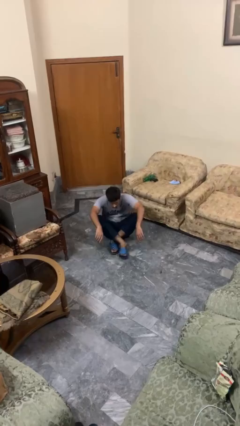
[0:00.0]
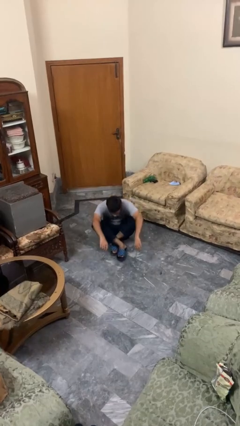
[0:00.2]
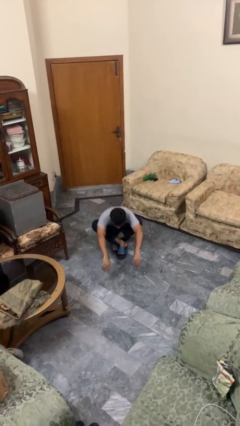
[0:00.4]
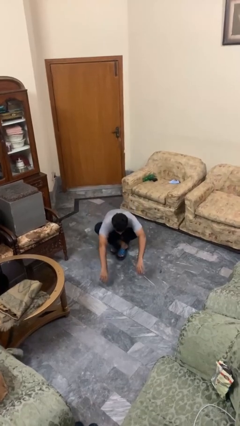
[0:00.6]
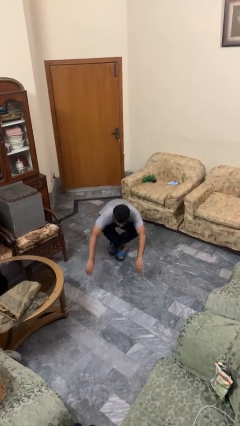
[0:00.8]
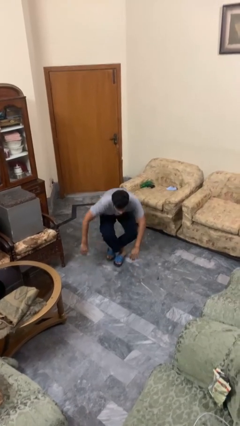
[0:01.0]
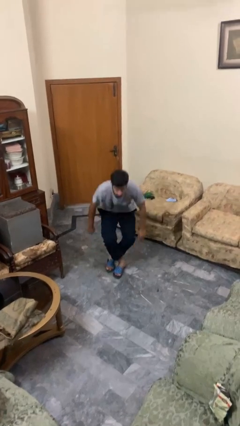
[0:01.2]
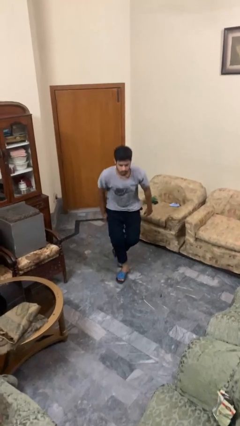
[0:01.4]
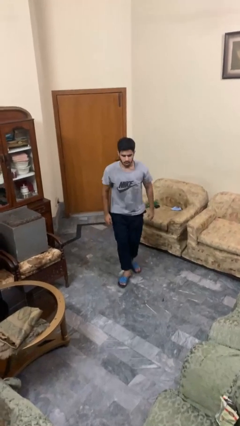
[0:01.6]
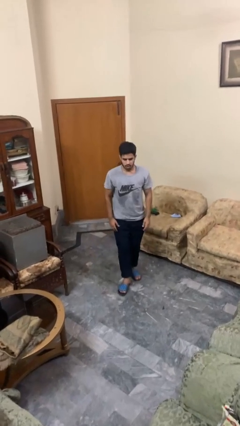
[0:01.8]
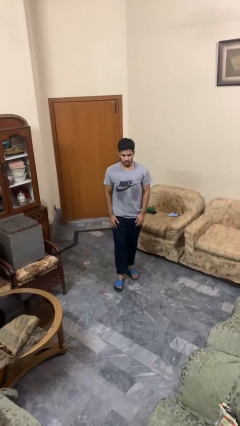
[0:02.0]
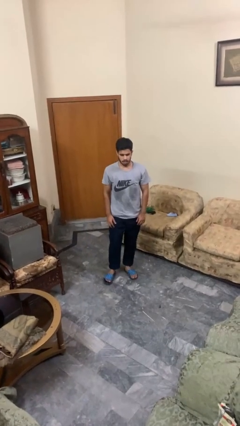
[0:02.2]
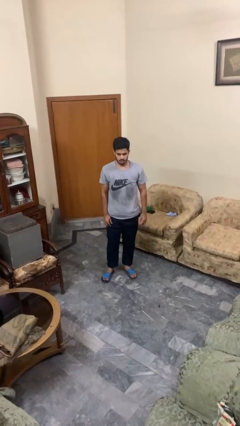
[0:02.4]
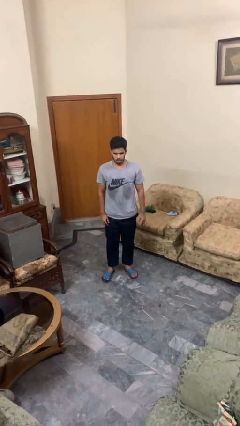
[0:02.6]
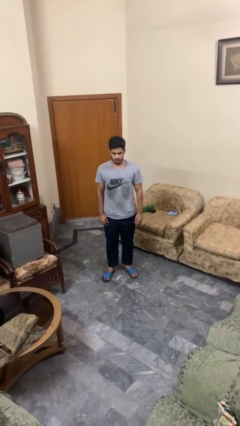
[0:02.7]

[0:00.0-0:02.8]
person stands up from floor

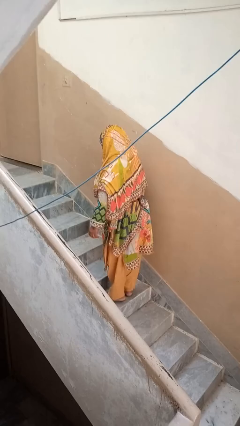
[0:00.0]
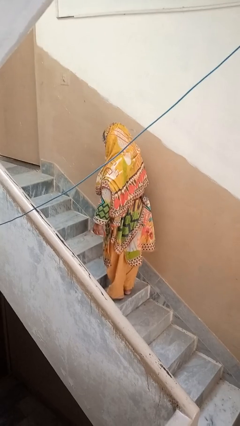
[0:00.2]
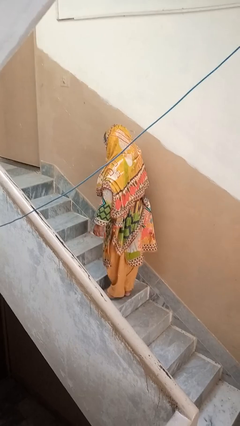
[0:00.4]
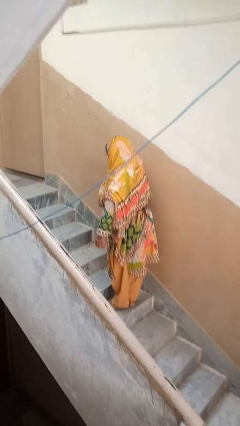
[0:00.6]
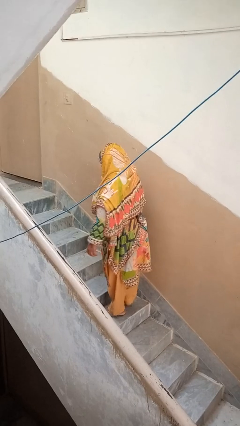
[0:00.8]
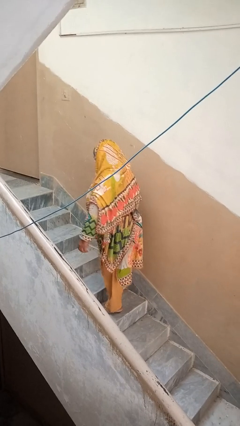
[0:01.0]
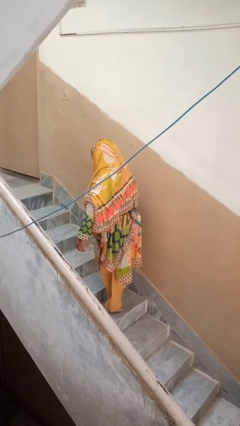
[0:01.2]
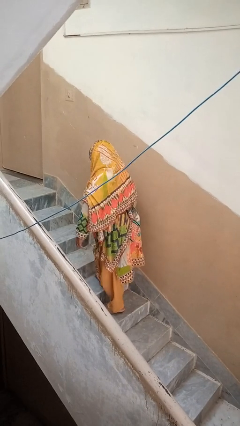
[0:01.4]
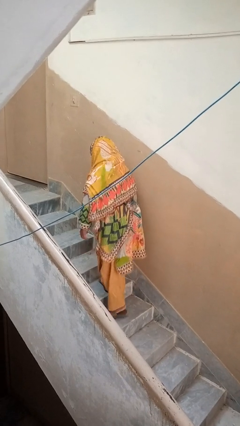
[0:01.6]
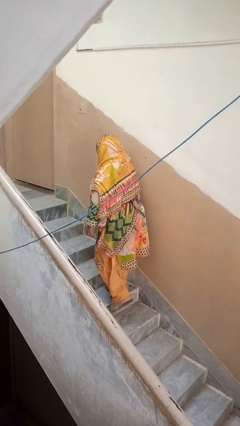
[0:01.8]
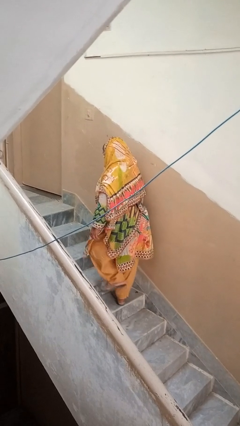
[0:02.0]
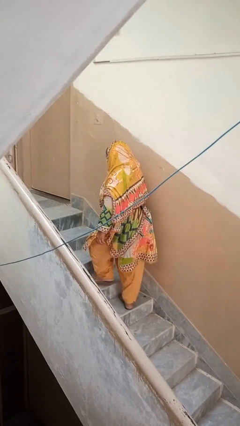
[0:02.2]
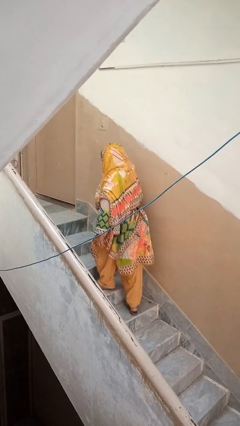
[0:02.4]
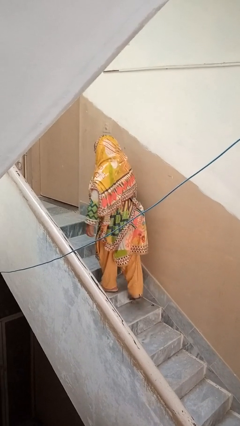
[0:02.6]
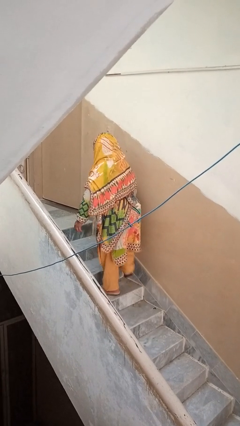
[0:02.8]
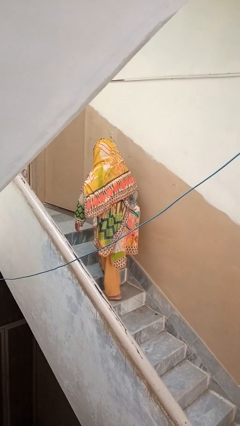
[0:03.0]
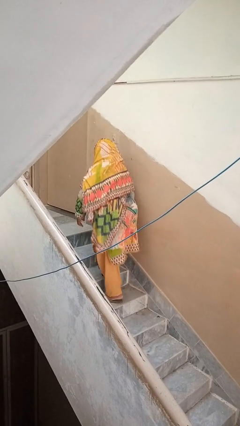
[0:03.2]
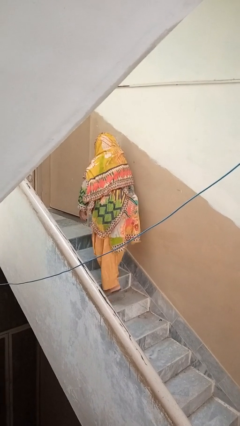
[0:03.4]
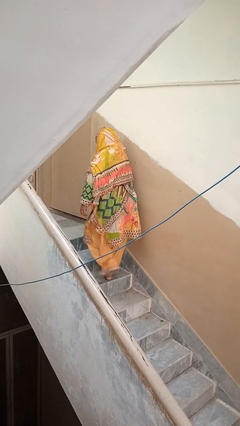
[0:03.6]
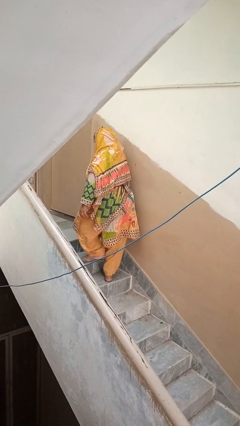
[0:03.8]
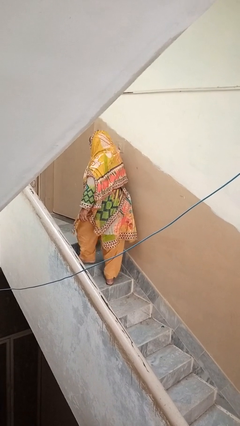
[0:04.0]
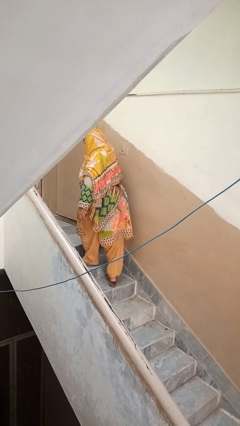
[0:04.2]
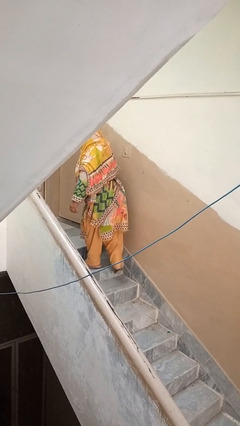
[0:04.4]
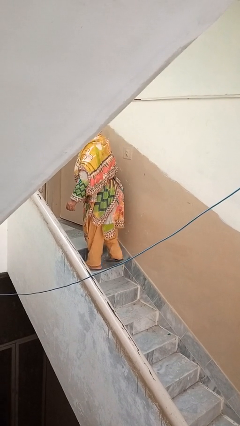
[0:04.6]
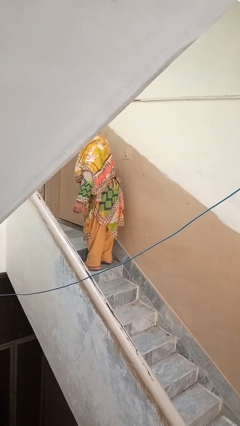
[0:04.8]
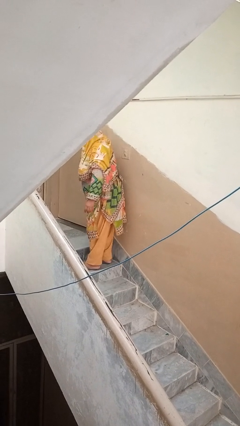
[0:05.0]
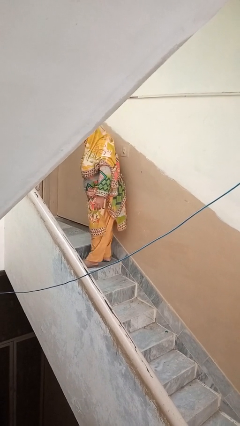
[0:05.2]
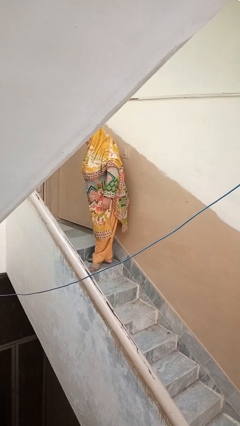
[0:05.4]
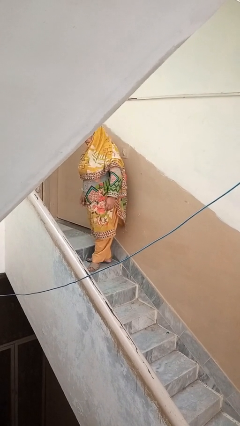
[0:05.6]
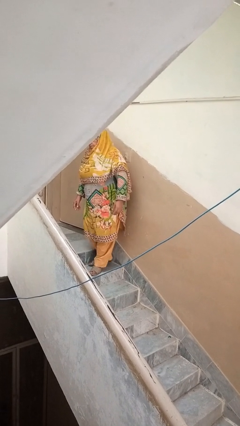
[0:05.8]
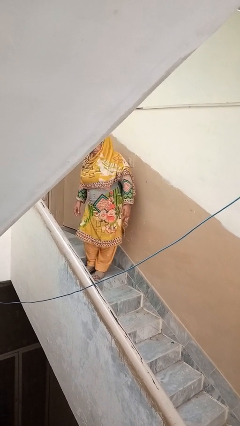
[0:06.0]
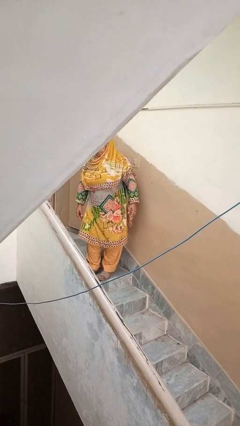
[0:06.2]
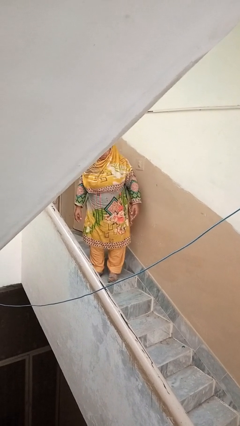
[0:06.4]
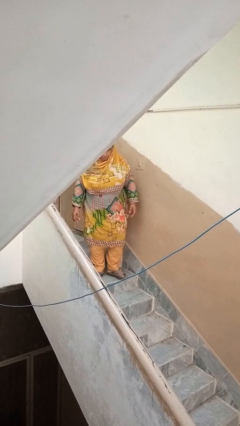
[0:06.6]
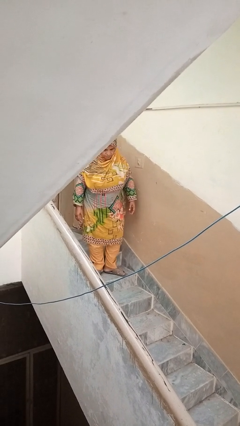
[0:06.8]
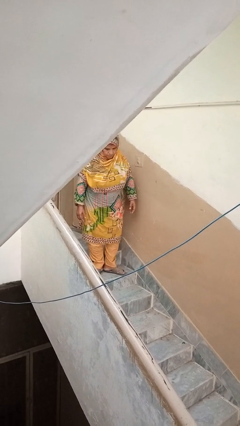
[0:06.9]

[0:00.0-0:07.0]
person climbs up stairs

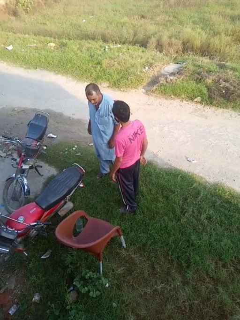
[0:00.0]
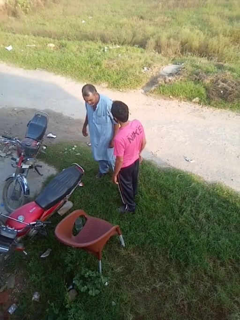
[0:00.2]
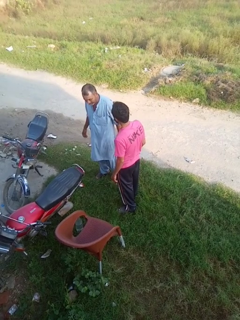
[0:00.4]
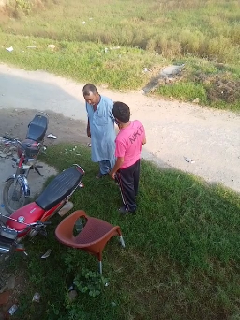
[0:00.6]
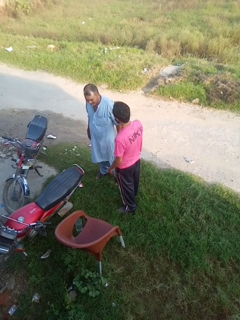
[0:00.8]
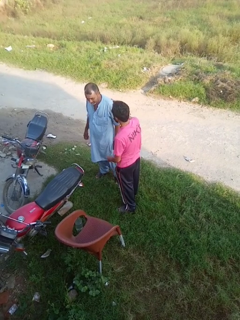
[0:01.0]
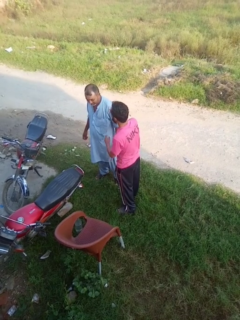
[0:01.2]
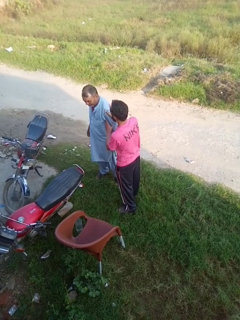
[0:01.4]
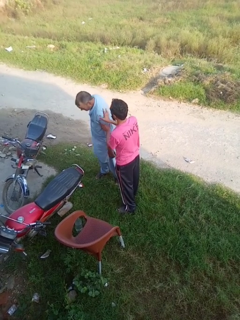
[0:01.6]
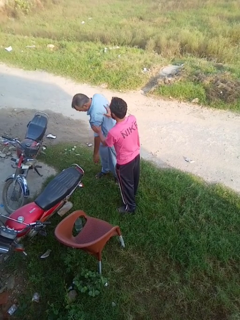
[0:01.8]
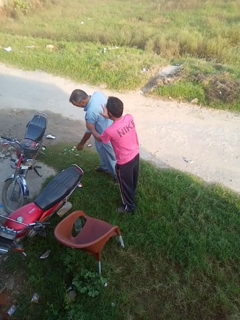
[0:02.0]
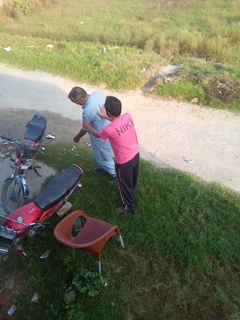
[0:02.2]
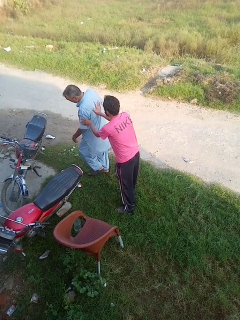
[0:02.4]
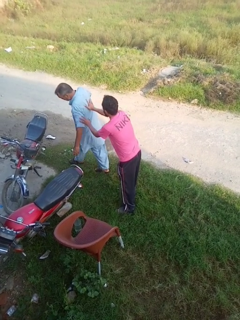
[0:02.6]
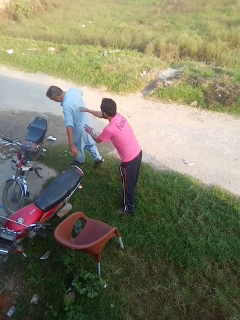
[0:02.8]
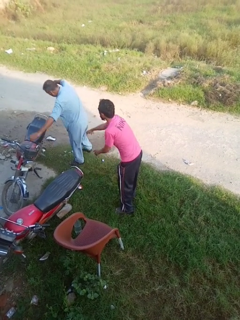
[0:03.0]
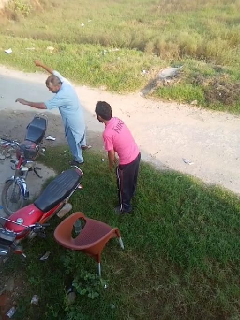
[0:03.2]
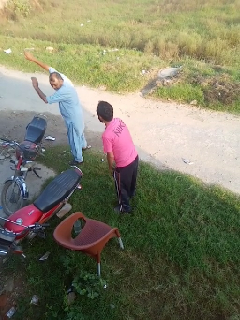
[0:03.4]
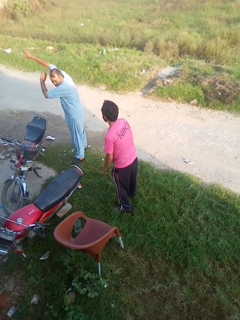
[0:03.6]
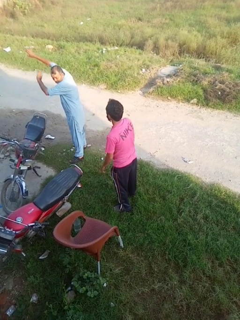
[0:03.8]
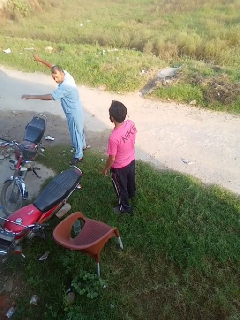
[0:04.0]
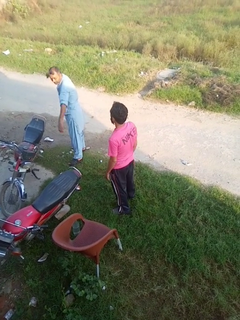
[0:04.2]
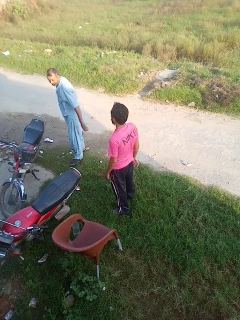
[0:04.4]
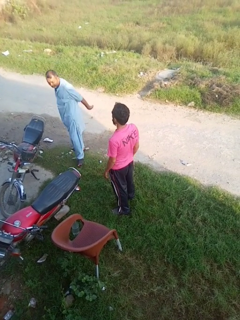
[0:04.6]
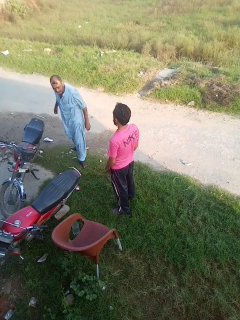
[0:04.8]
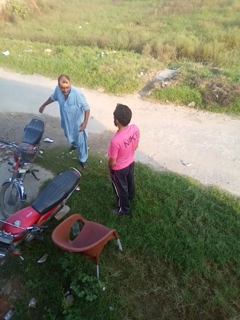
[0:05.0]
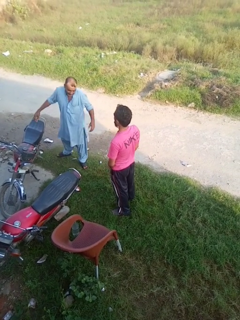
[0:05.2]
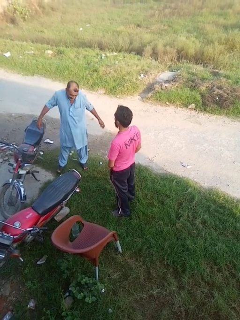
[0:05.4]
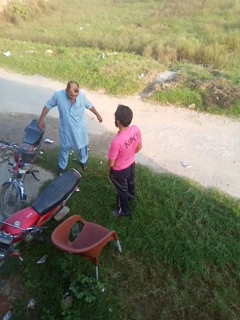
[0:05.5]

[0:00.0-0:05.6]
person shoves person

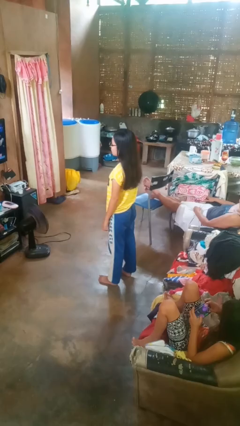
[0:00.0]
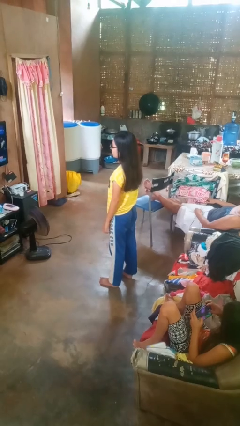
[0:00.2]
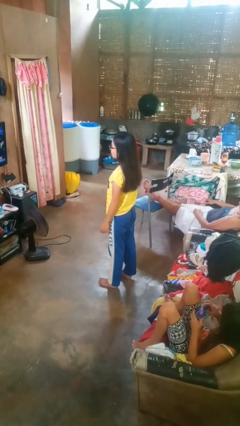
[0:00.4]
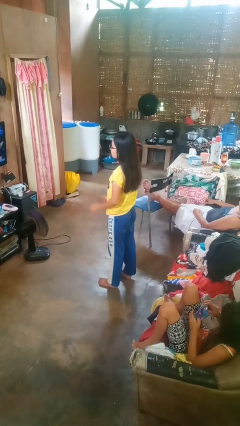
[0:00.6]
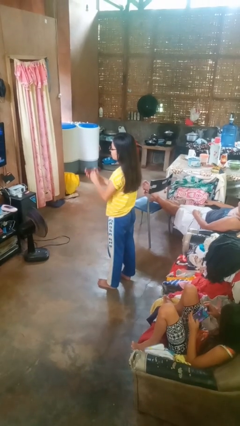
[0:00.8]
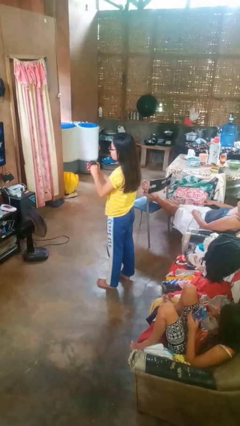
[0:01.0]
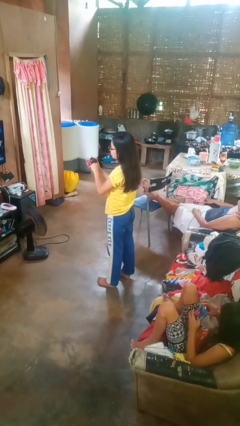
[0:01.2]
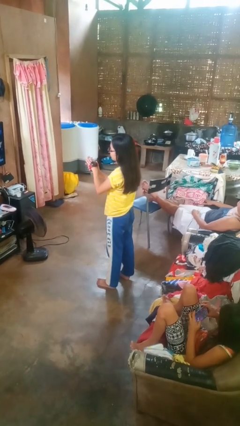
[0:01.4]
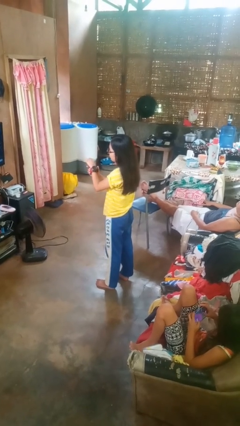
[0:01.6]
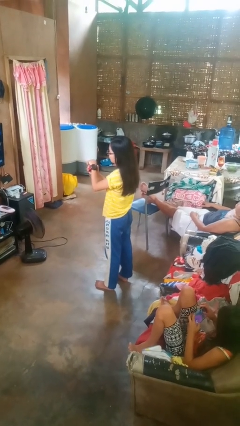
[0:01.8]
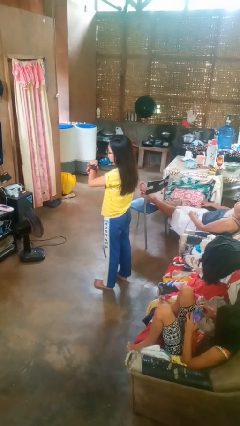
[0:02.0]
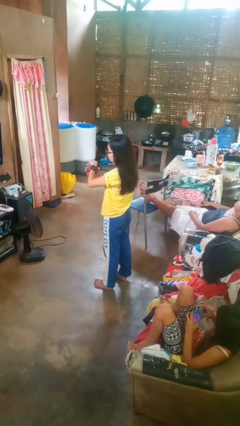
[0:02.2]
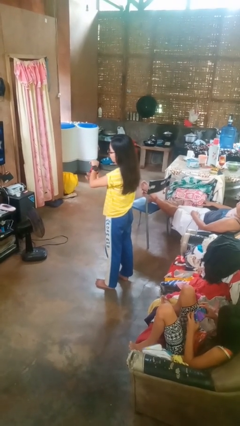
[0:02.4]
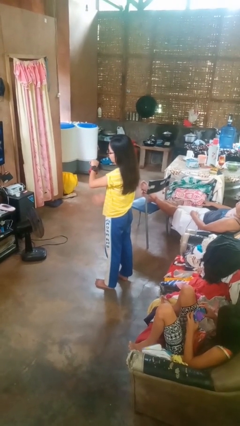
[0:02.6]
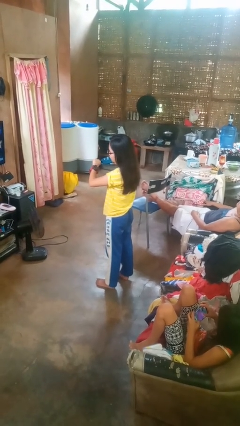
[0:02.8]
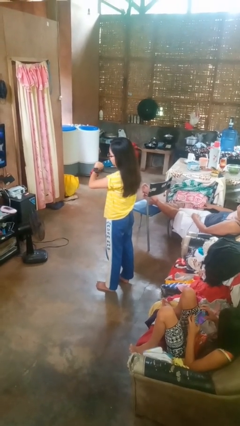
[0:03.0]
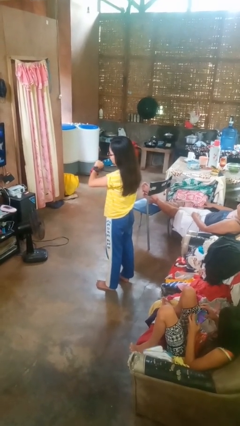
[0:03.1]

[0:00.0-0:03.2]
person puts on wristwatch

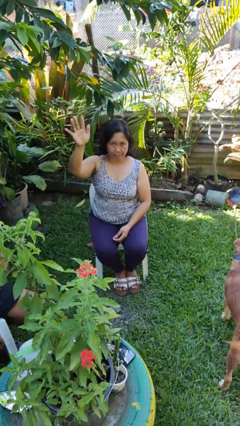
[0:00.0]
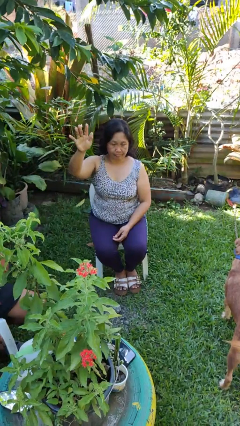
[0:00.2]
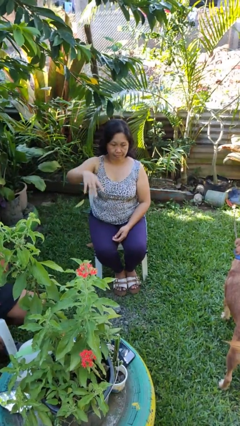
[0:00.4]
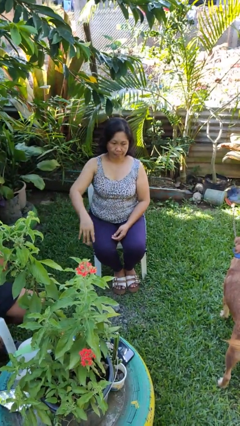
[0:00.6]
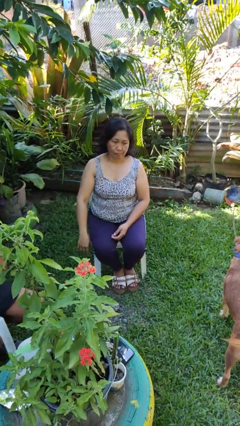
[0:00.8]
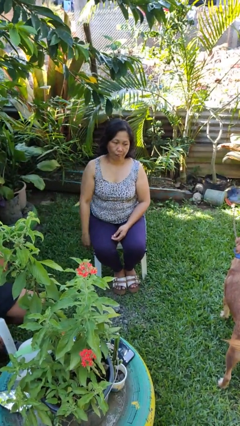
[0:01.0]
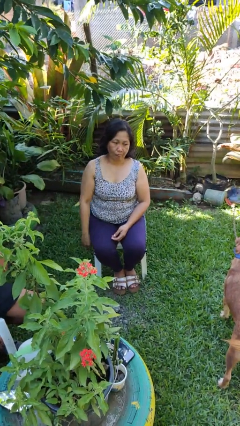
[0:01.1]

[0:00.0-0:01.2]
person gestures lower hand
